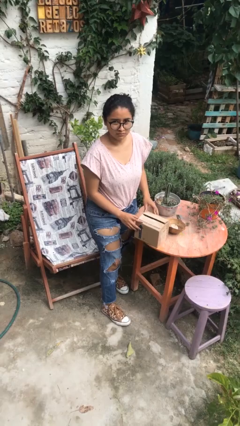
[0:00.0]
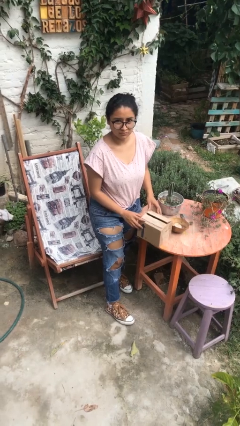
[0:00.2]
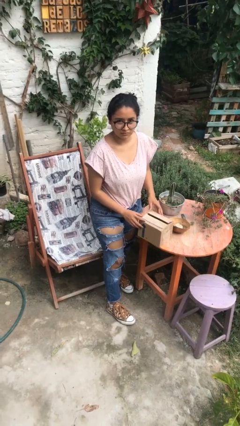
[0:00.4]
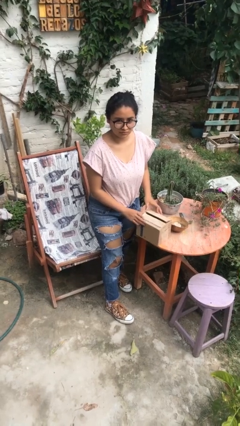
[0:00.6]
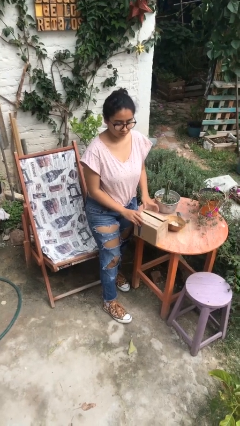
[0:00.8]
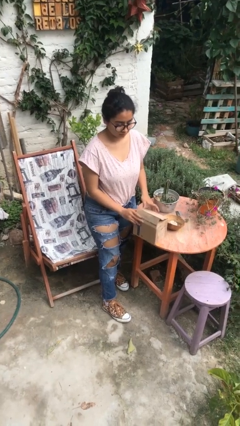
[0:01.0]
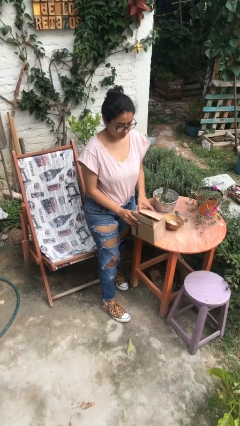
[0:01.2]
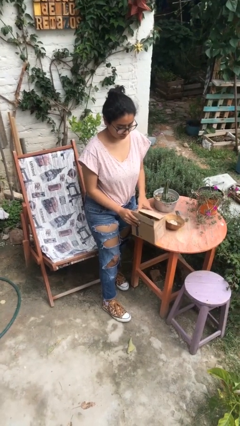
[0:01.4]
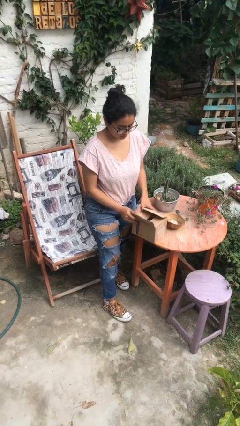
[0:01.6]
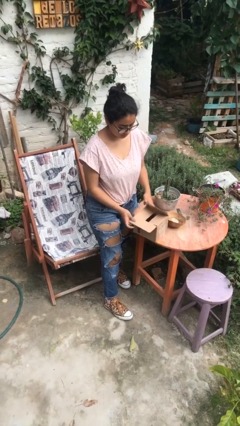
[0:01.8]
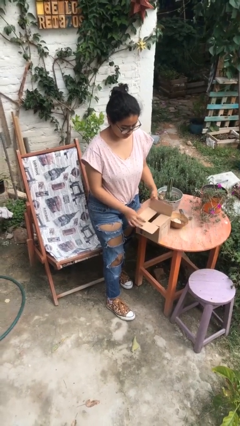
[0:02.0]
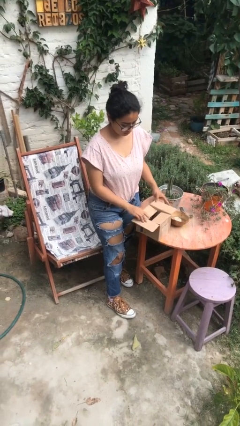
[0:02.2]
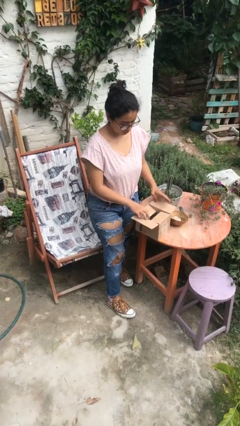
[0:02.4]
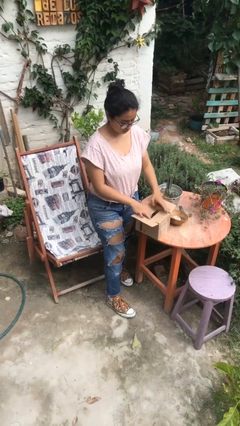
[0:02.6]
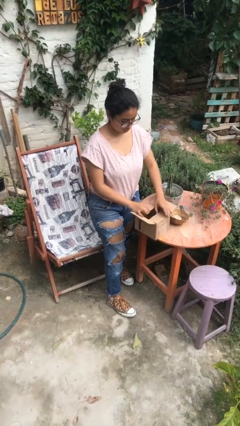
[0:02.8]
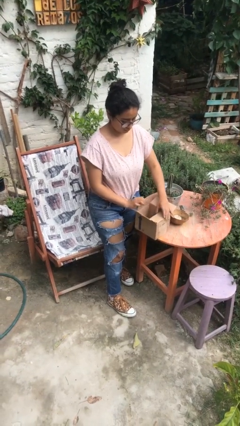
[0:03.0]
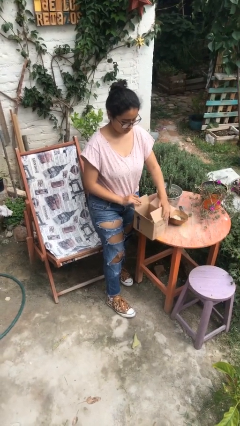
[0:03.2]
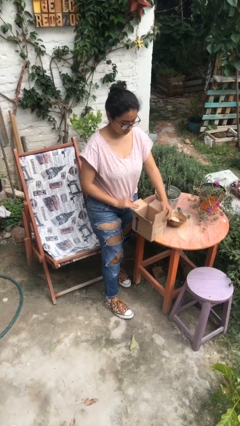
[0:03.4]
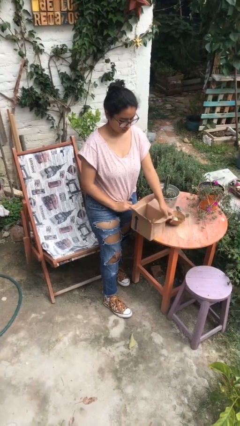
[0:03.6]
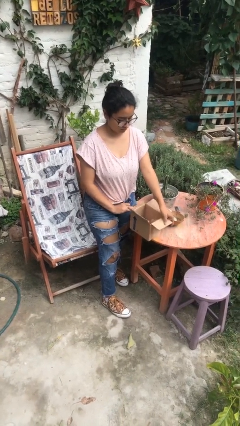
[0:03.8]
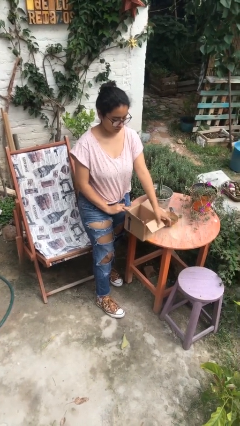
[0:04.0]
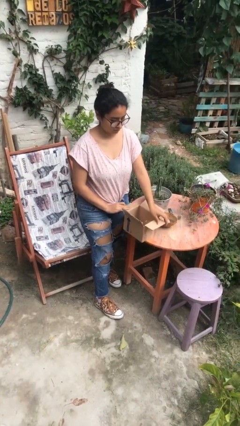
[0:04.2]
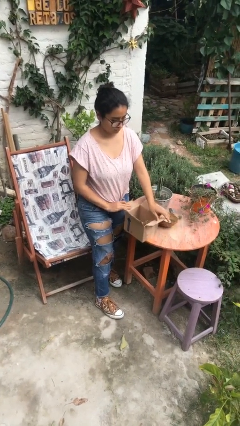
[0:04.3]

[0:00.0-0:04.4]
person opens box

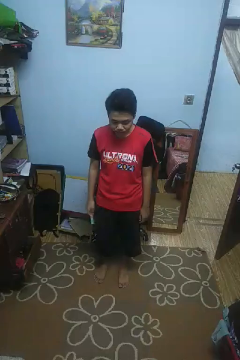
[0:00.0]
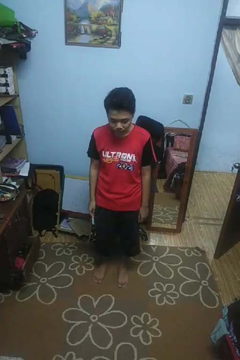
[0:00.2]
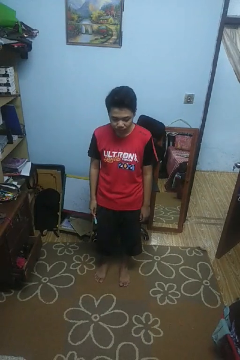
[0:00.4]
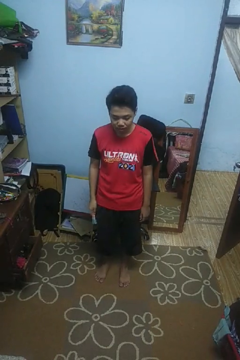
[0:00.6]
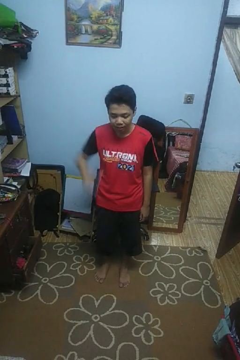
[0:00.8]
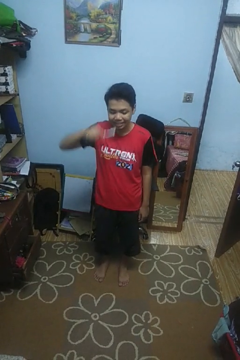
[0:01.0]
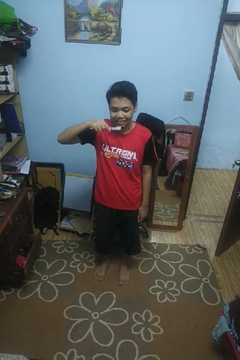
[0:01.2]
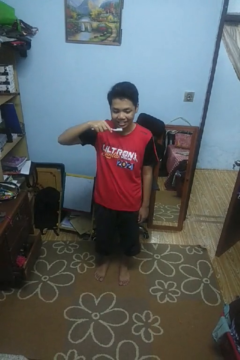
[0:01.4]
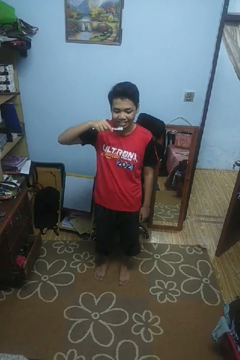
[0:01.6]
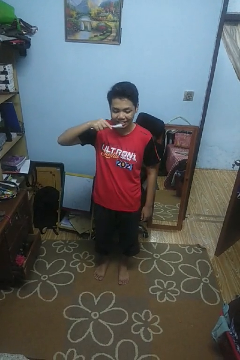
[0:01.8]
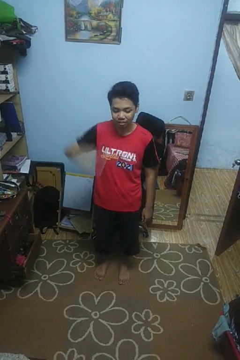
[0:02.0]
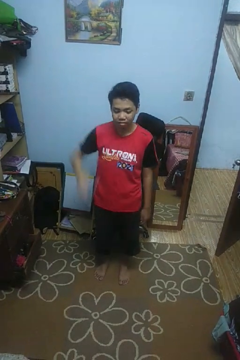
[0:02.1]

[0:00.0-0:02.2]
person brushes teeth

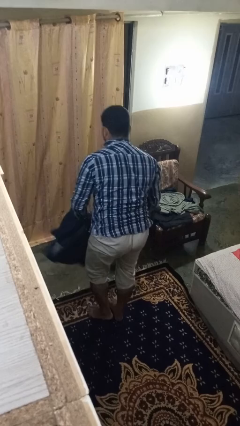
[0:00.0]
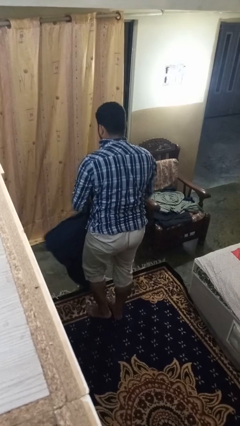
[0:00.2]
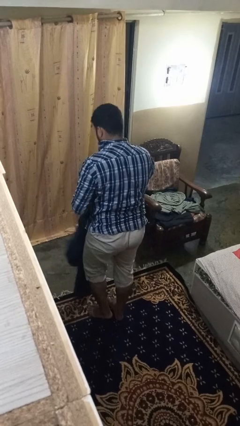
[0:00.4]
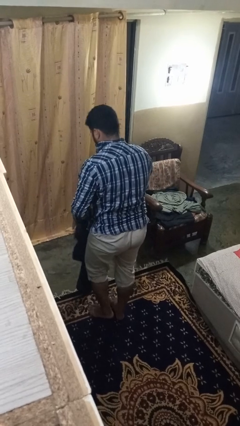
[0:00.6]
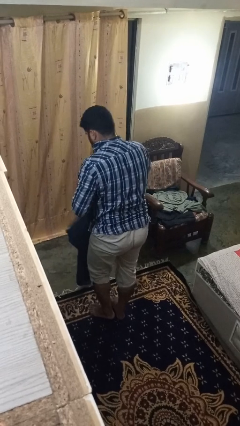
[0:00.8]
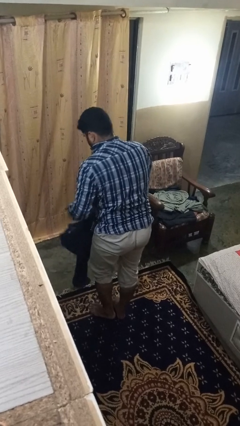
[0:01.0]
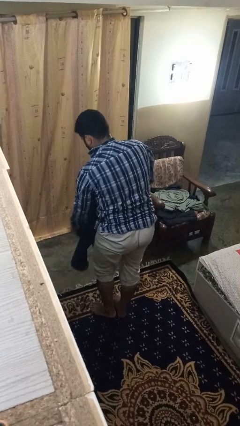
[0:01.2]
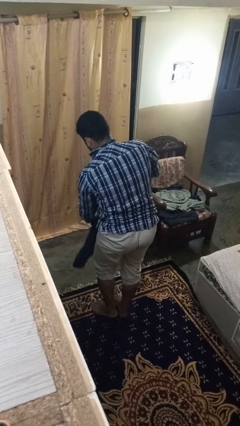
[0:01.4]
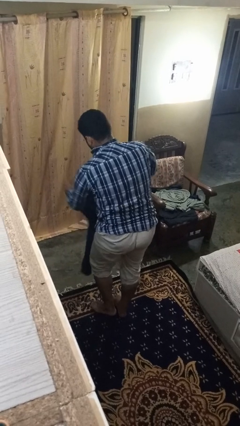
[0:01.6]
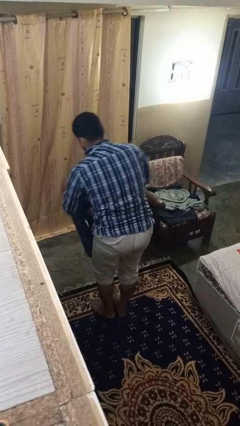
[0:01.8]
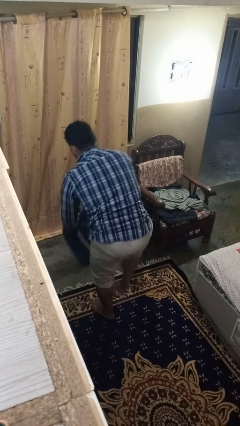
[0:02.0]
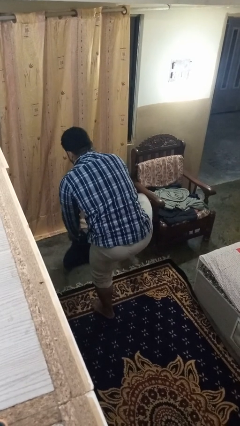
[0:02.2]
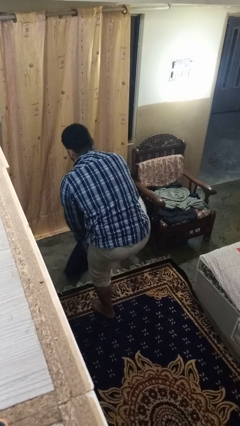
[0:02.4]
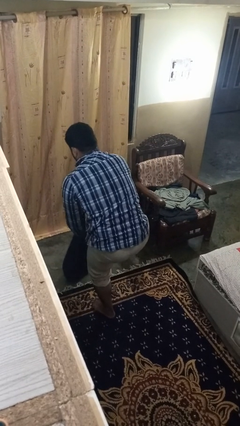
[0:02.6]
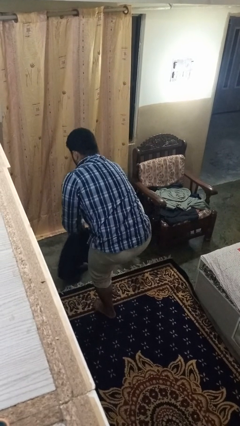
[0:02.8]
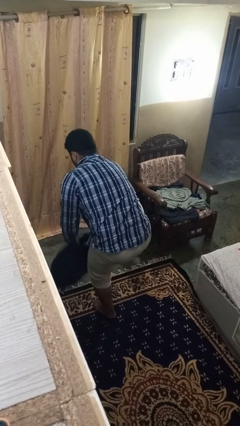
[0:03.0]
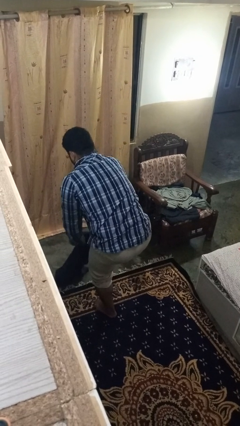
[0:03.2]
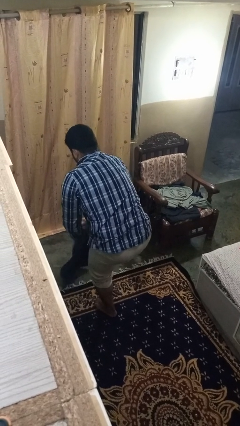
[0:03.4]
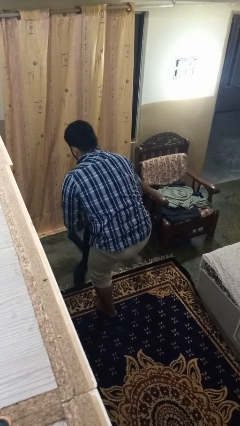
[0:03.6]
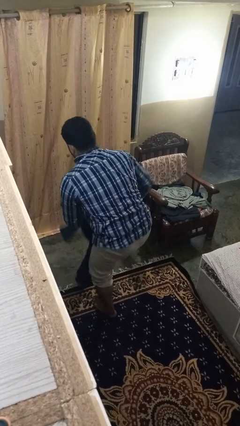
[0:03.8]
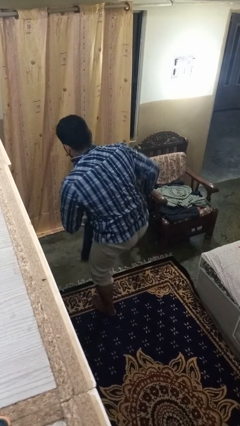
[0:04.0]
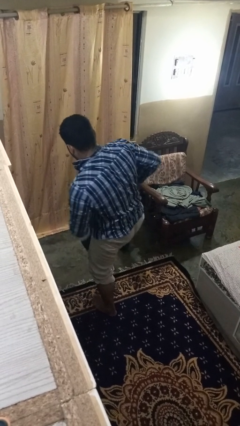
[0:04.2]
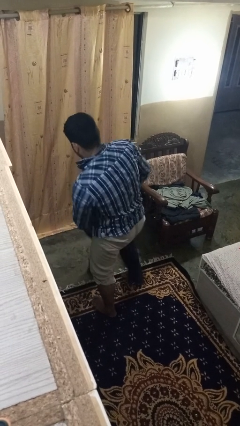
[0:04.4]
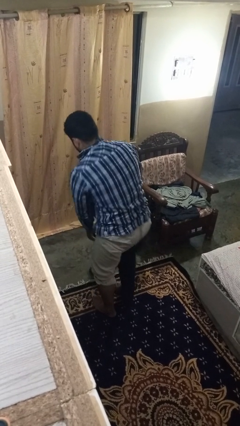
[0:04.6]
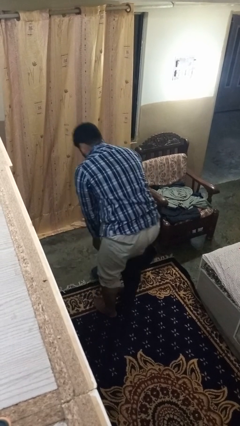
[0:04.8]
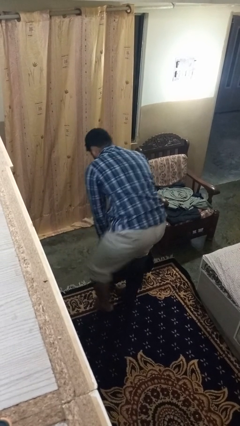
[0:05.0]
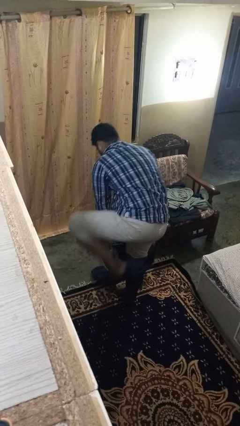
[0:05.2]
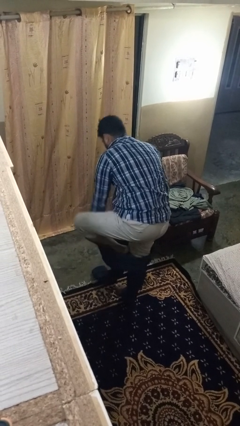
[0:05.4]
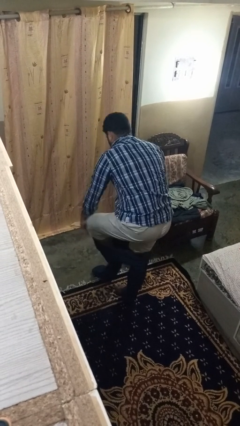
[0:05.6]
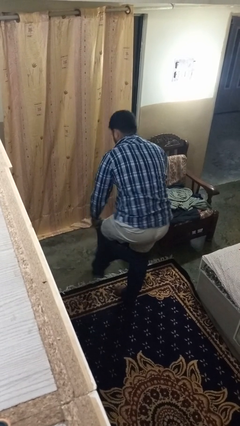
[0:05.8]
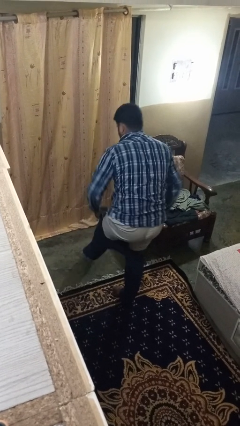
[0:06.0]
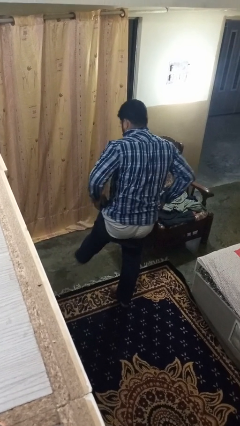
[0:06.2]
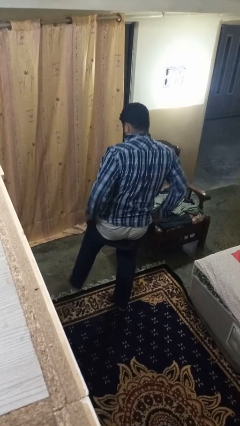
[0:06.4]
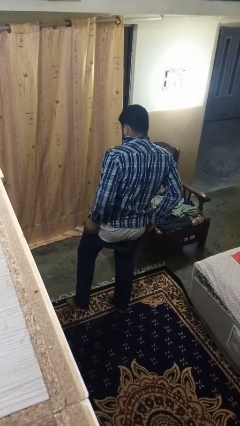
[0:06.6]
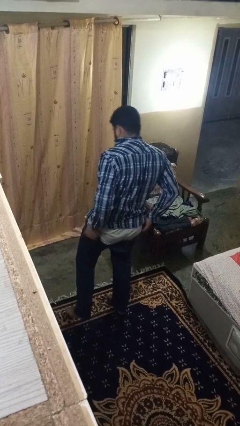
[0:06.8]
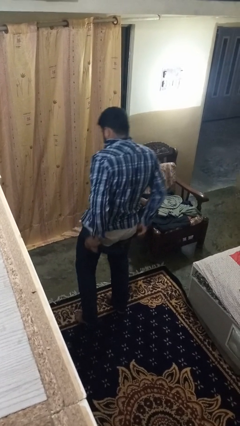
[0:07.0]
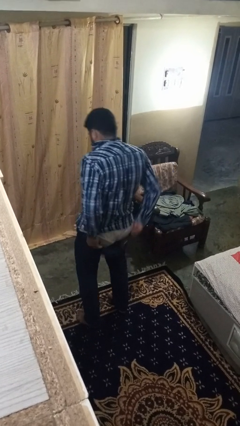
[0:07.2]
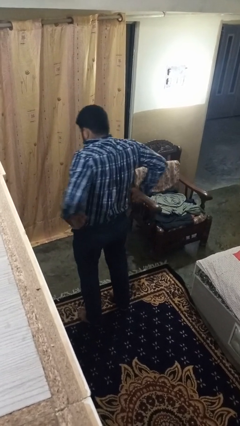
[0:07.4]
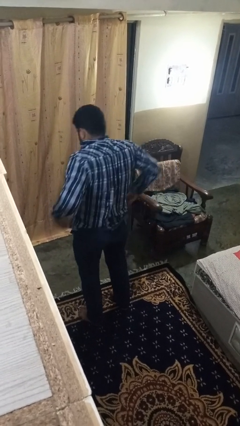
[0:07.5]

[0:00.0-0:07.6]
person puts on pants

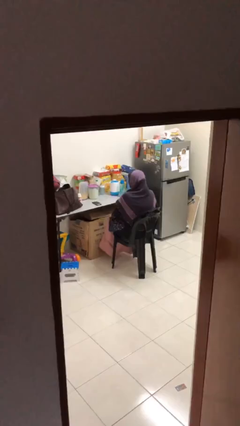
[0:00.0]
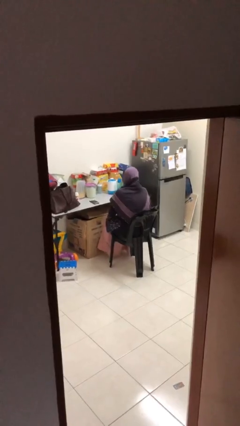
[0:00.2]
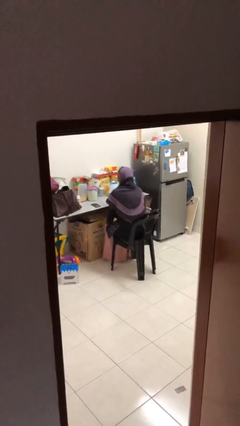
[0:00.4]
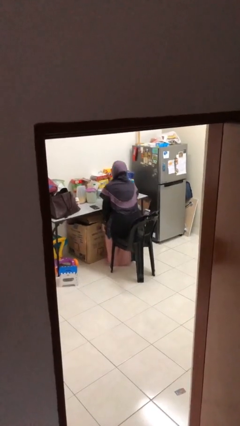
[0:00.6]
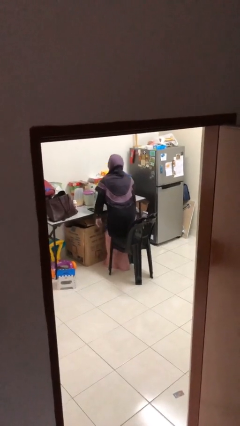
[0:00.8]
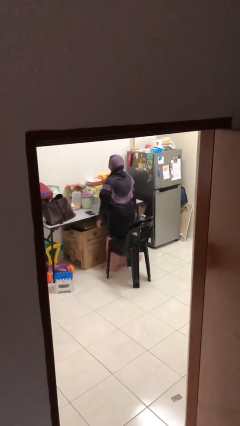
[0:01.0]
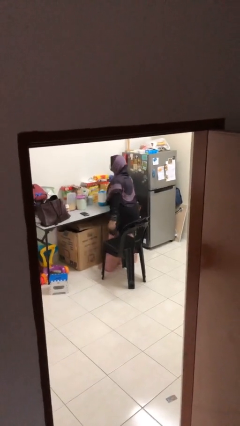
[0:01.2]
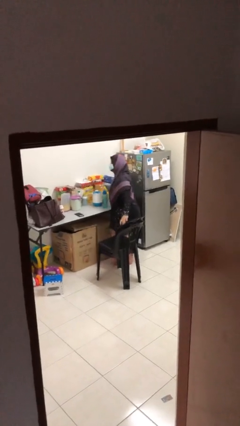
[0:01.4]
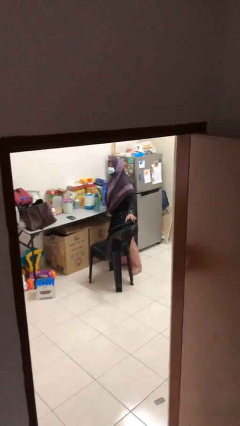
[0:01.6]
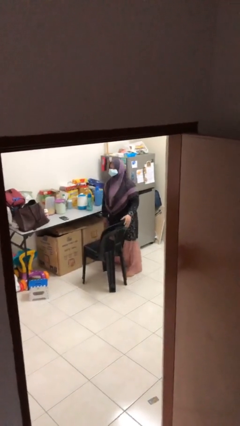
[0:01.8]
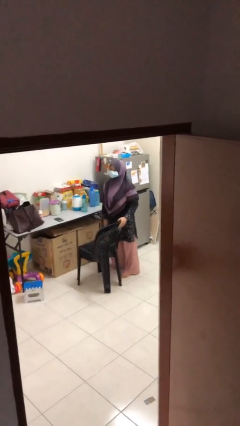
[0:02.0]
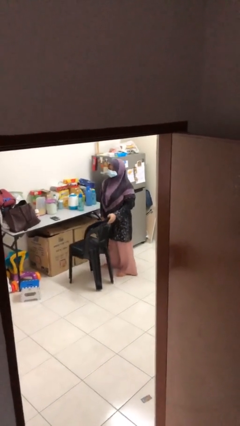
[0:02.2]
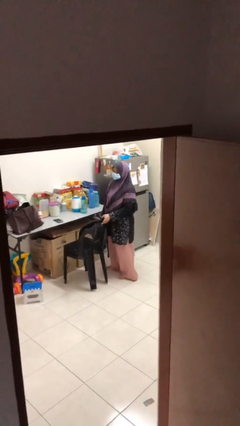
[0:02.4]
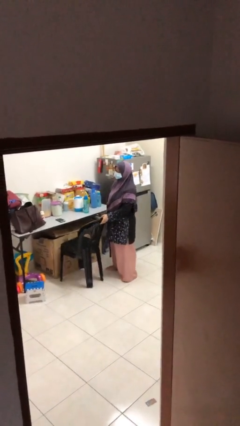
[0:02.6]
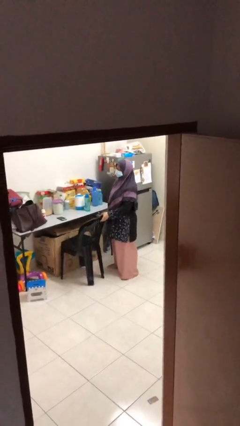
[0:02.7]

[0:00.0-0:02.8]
person stands up

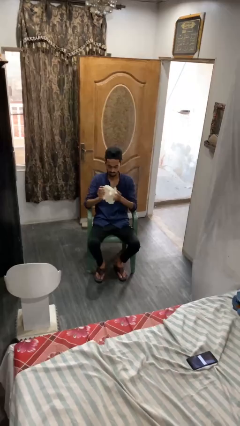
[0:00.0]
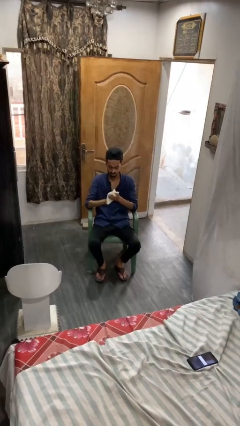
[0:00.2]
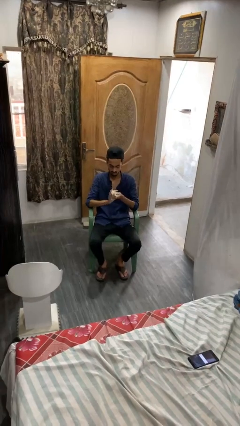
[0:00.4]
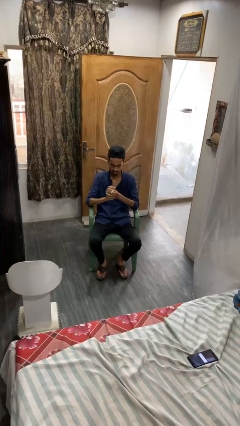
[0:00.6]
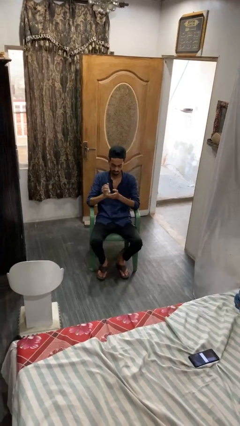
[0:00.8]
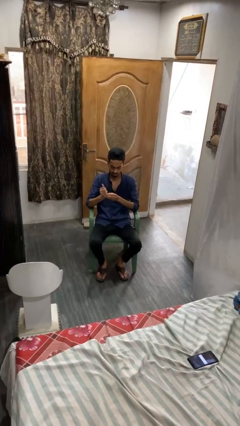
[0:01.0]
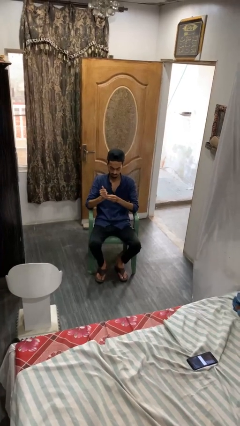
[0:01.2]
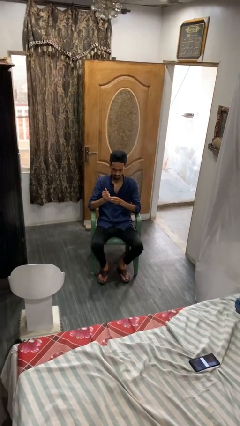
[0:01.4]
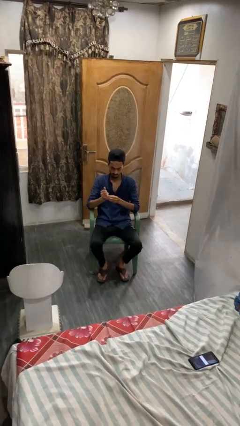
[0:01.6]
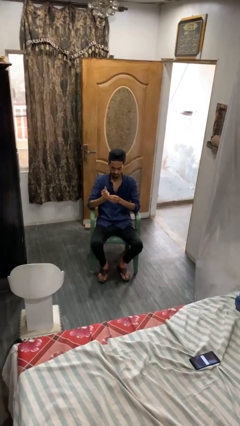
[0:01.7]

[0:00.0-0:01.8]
person crumples paper
